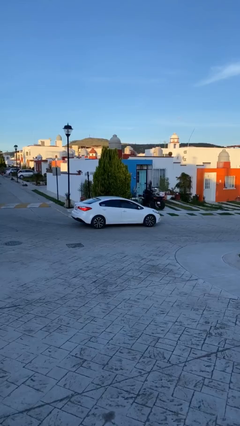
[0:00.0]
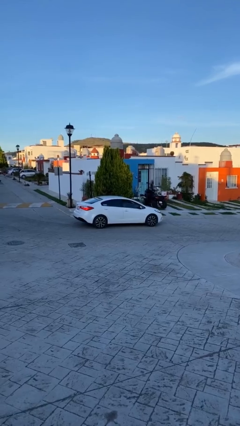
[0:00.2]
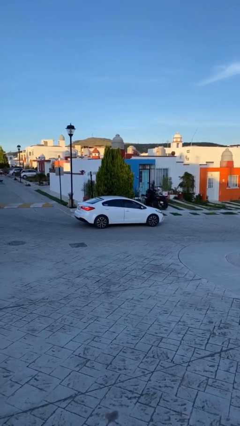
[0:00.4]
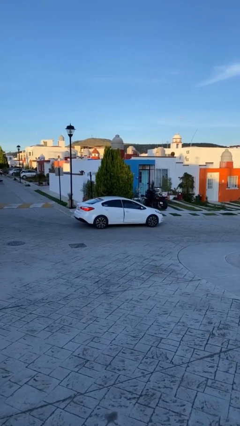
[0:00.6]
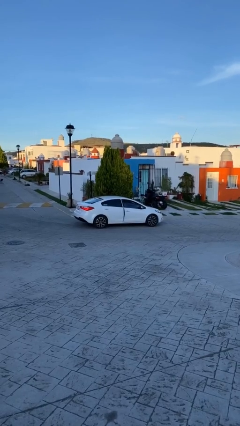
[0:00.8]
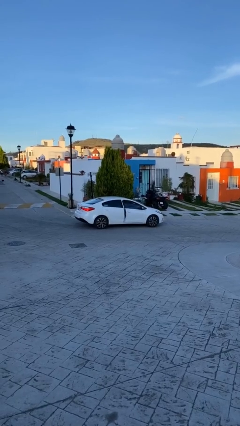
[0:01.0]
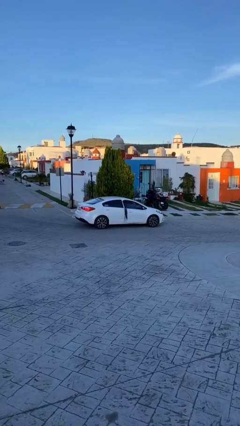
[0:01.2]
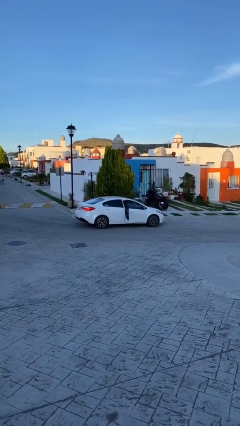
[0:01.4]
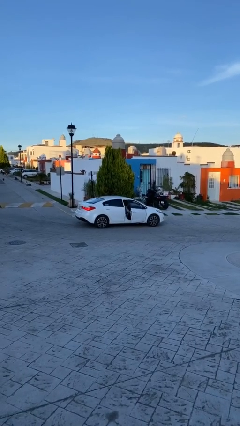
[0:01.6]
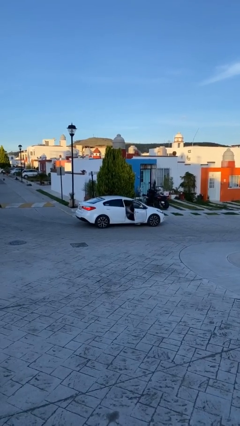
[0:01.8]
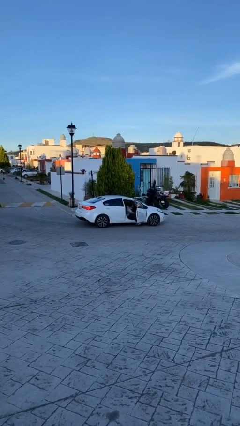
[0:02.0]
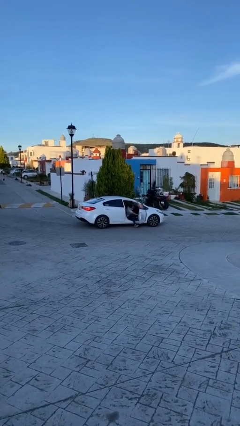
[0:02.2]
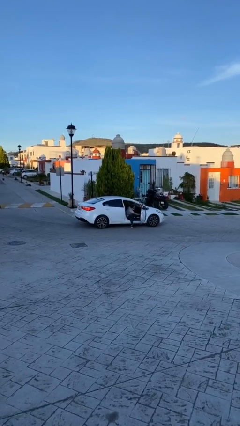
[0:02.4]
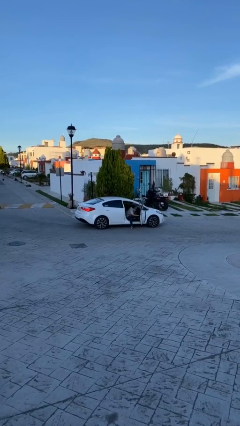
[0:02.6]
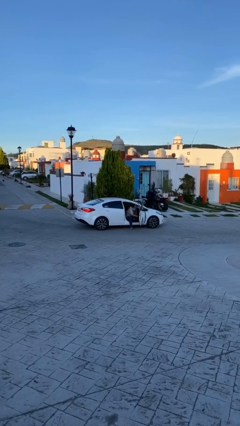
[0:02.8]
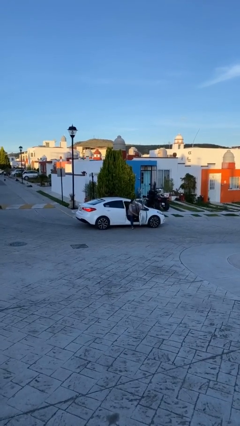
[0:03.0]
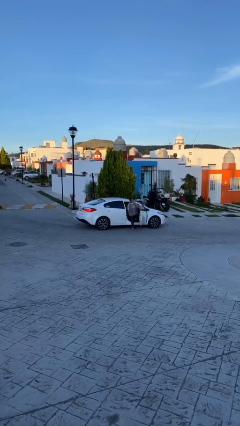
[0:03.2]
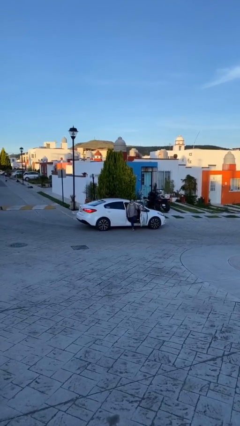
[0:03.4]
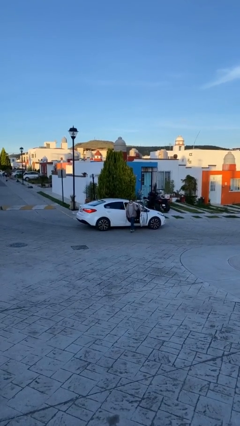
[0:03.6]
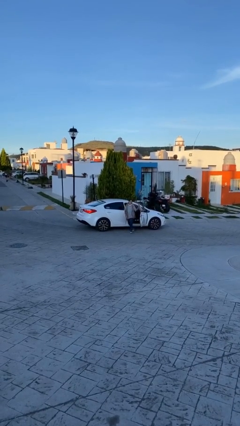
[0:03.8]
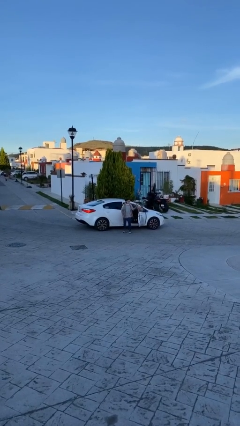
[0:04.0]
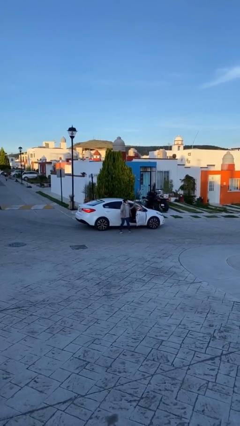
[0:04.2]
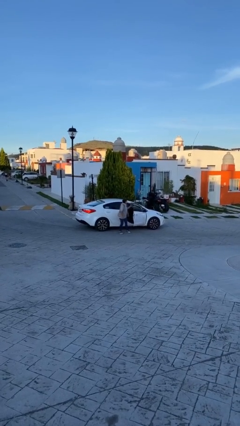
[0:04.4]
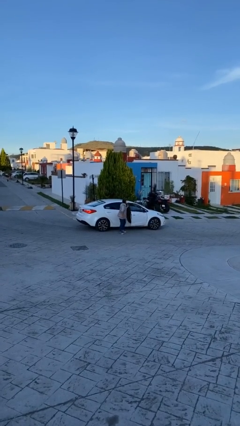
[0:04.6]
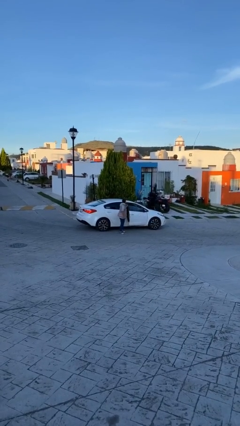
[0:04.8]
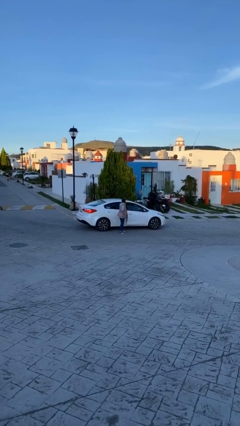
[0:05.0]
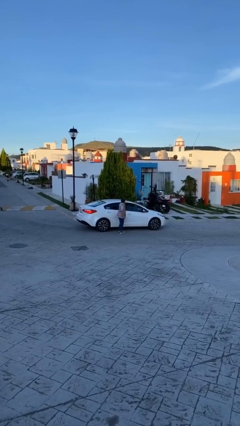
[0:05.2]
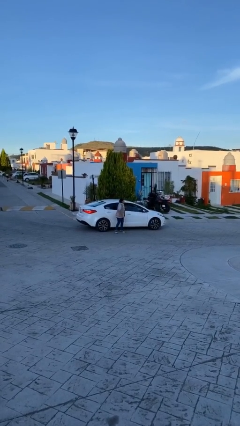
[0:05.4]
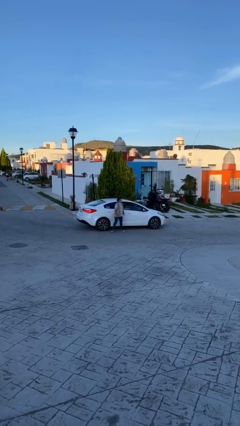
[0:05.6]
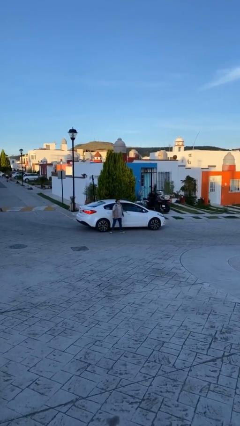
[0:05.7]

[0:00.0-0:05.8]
car drops off person

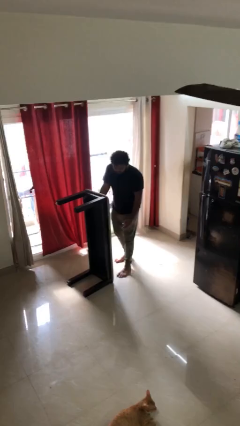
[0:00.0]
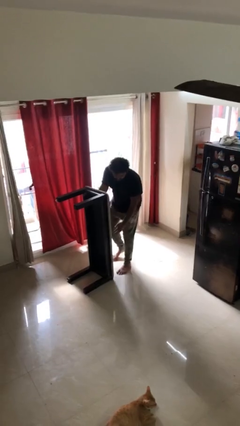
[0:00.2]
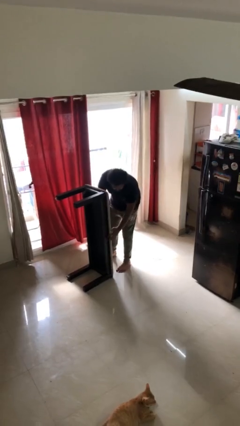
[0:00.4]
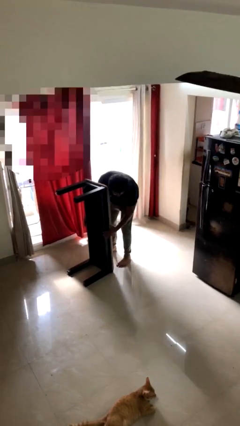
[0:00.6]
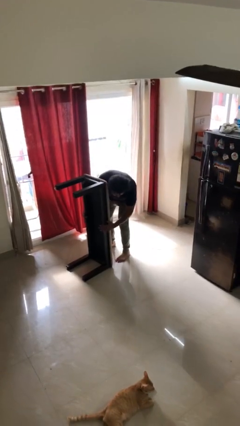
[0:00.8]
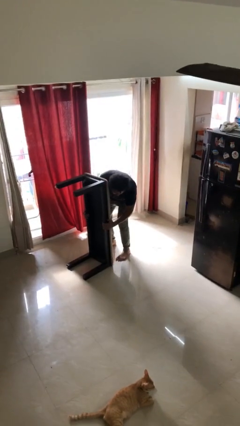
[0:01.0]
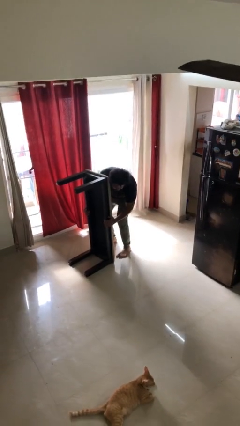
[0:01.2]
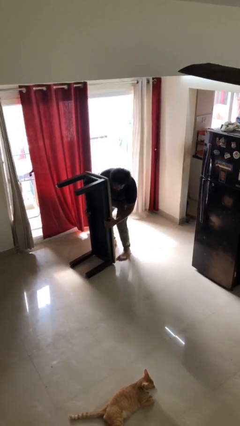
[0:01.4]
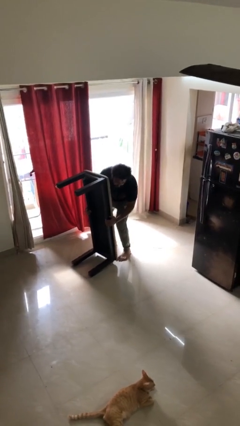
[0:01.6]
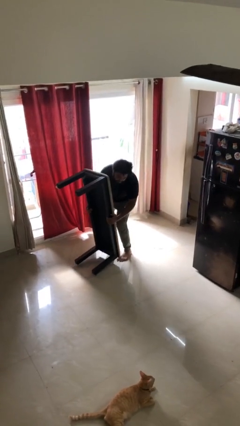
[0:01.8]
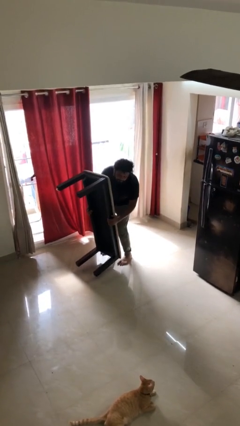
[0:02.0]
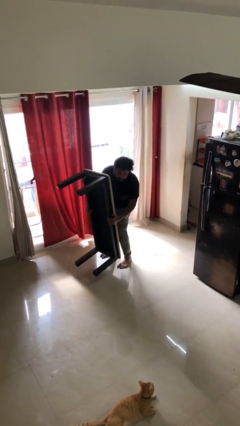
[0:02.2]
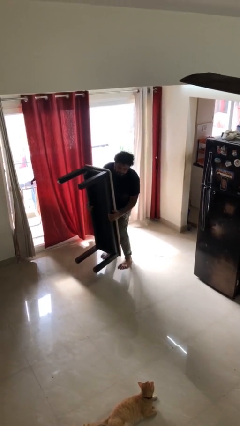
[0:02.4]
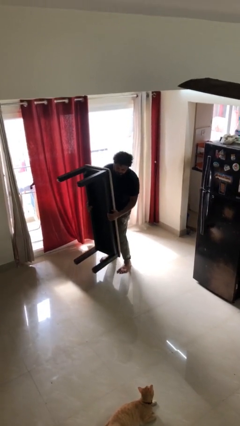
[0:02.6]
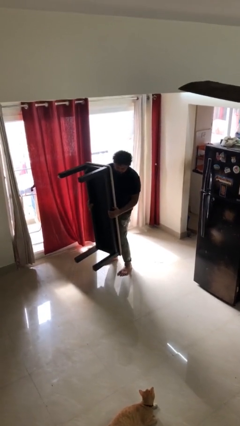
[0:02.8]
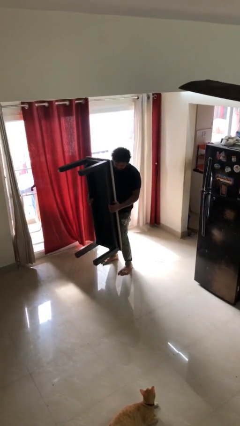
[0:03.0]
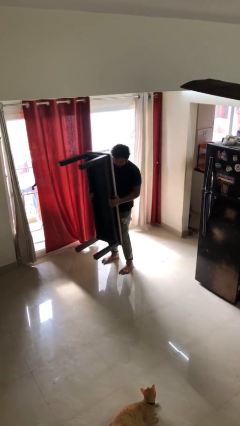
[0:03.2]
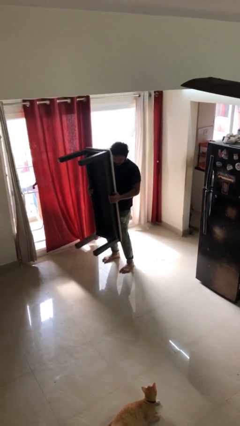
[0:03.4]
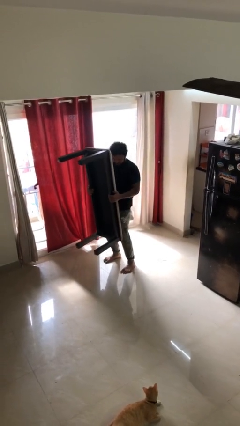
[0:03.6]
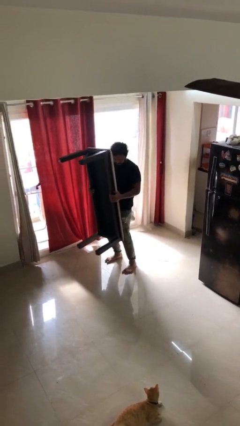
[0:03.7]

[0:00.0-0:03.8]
person picks up object from floor

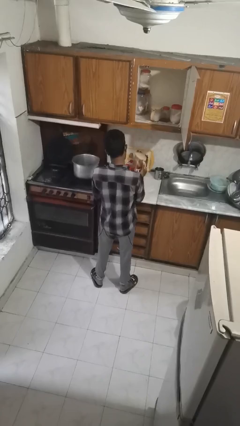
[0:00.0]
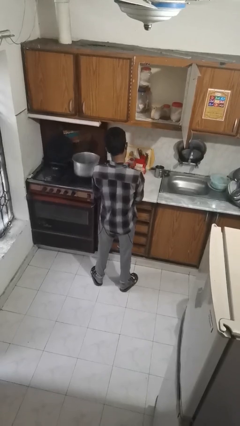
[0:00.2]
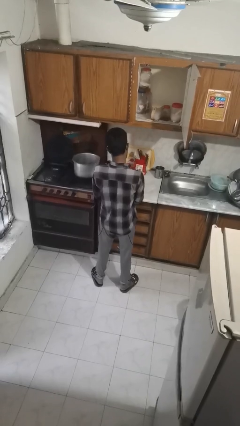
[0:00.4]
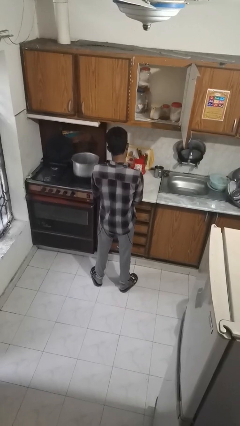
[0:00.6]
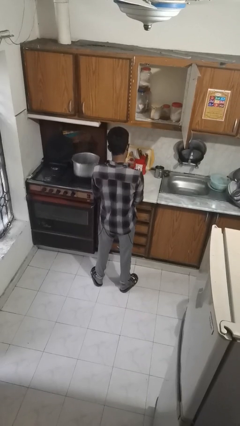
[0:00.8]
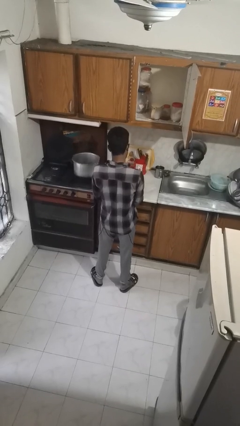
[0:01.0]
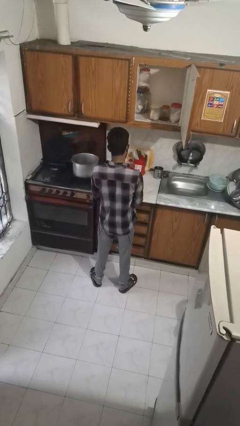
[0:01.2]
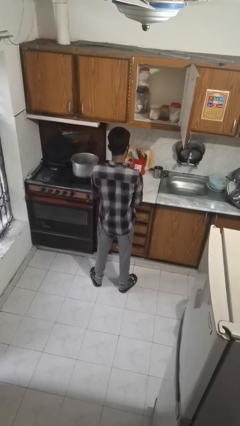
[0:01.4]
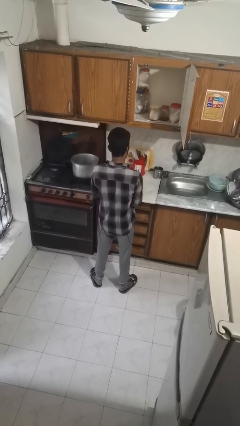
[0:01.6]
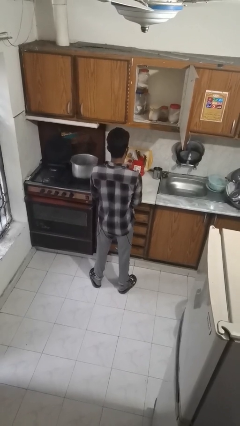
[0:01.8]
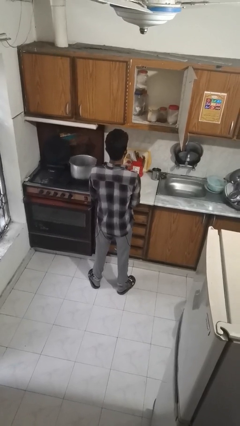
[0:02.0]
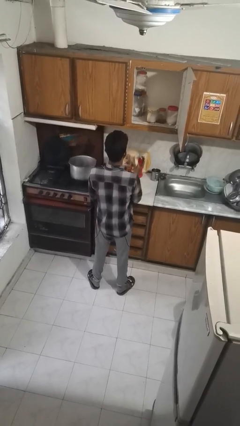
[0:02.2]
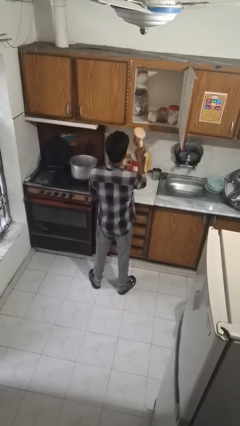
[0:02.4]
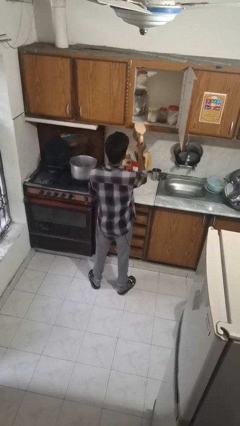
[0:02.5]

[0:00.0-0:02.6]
person puts down object into cabinet

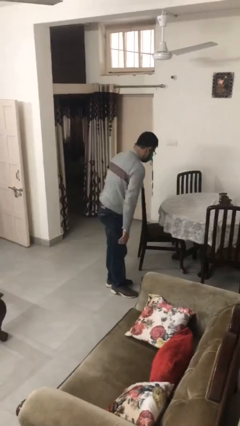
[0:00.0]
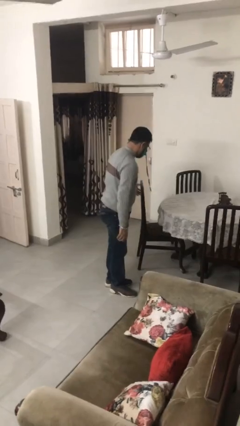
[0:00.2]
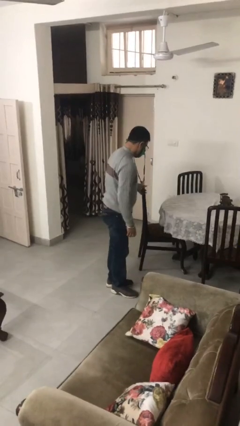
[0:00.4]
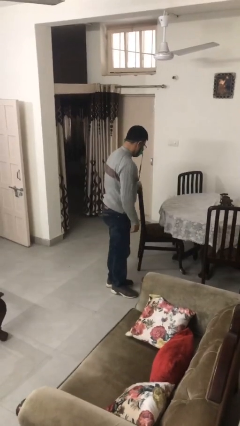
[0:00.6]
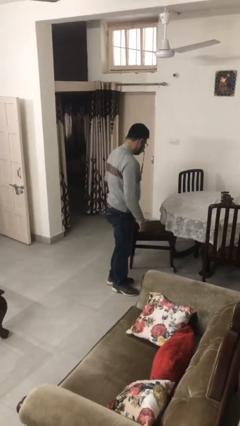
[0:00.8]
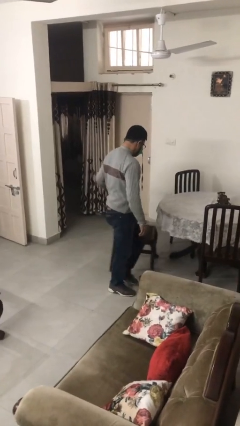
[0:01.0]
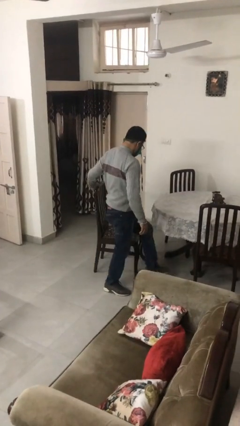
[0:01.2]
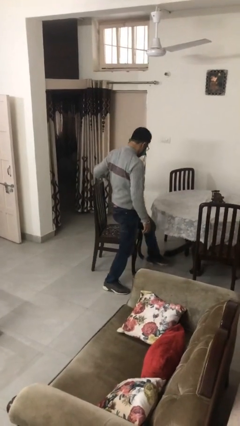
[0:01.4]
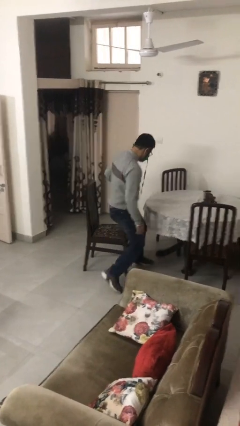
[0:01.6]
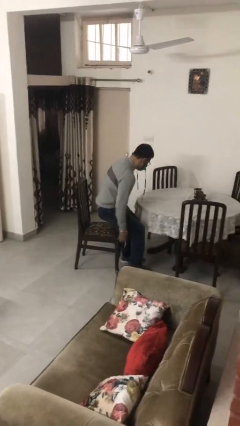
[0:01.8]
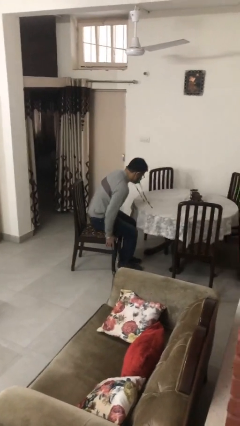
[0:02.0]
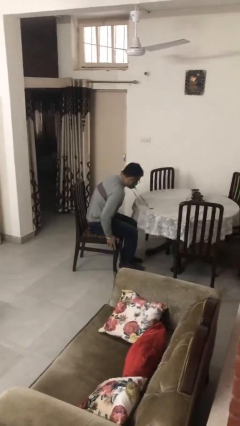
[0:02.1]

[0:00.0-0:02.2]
person sits down

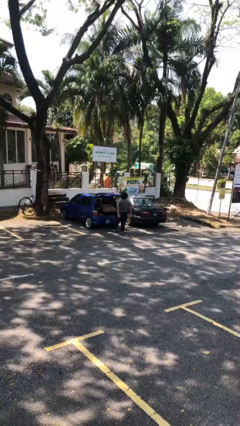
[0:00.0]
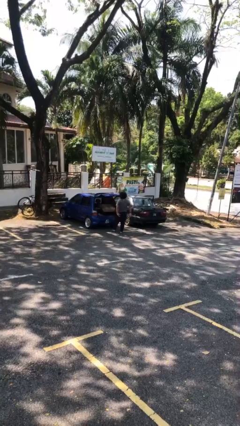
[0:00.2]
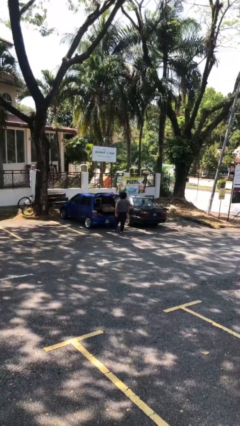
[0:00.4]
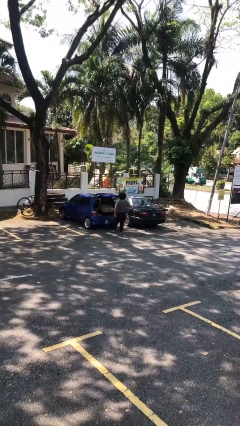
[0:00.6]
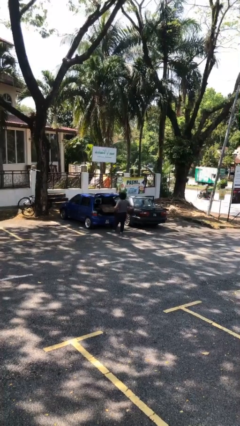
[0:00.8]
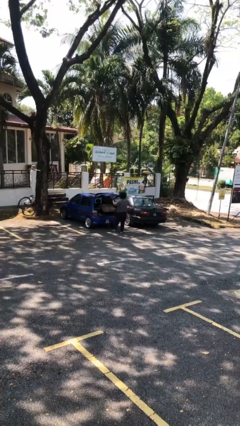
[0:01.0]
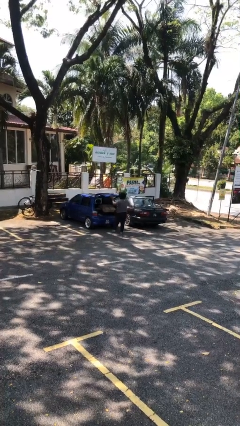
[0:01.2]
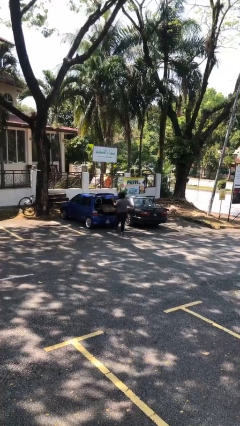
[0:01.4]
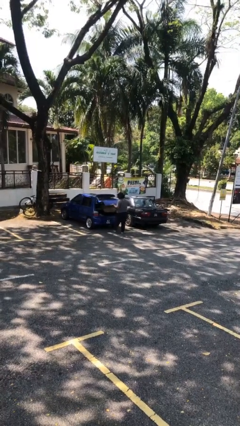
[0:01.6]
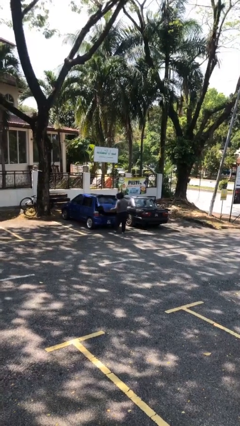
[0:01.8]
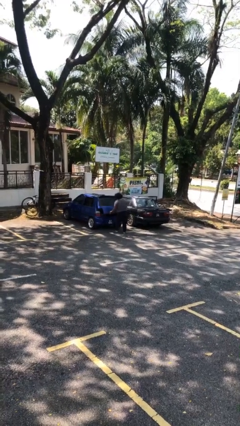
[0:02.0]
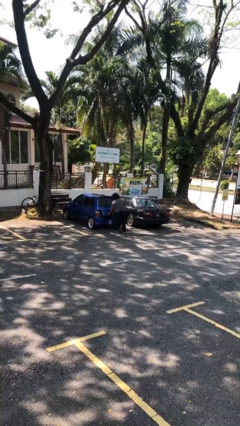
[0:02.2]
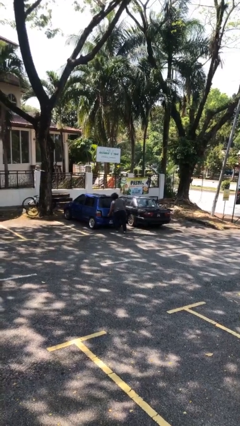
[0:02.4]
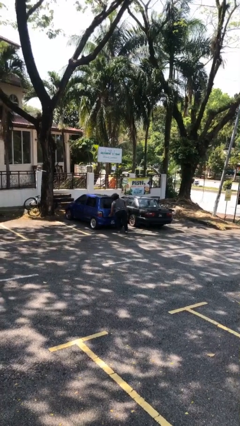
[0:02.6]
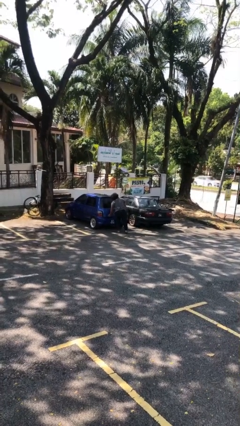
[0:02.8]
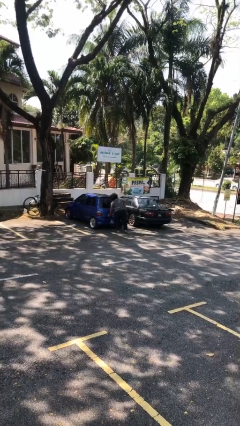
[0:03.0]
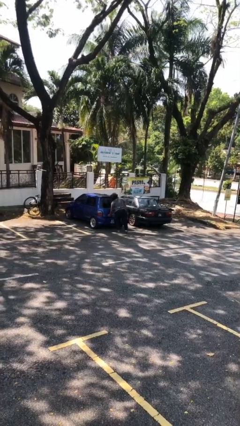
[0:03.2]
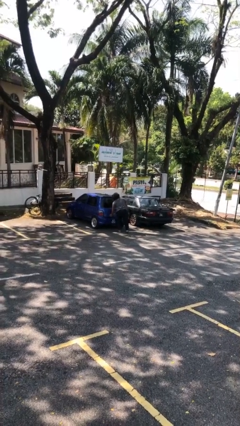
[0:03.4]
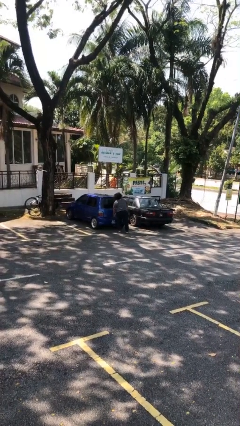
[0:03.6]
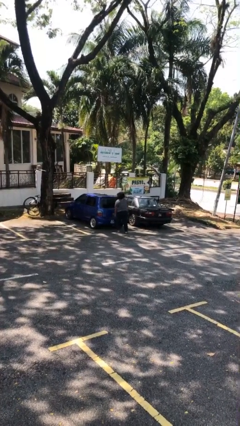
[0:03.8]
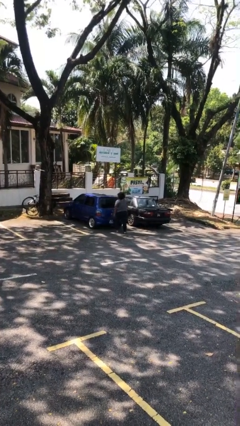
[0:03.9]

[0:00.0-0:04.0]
person closes car trunk
